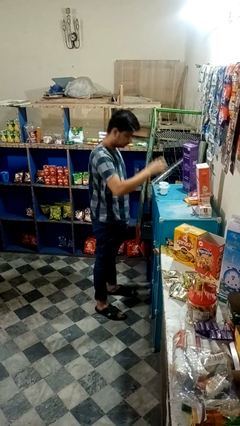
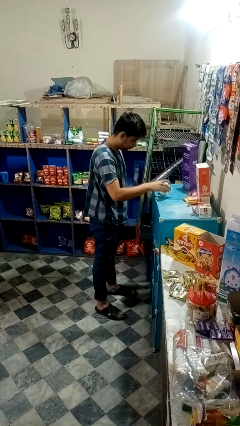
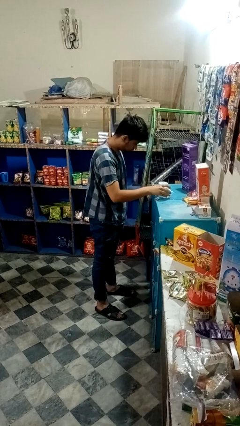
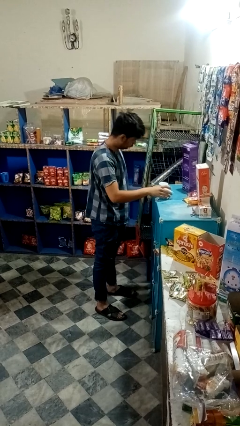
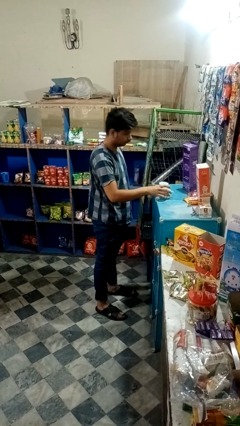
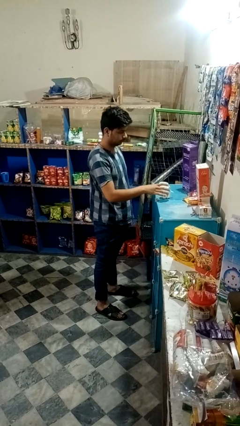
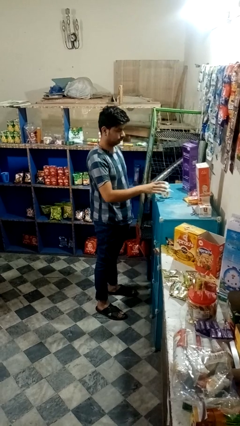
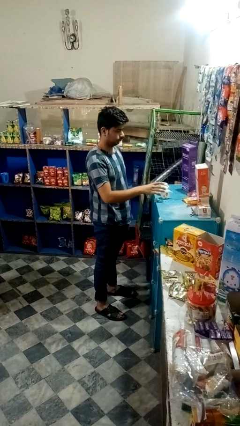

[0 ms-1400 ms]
person puts down object on table

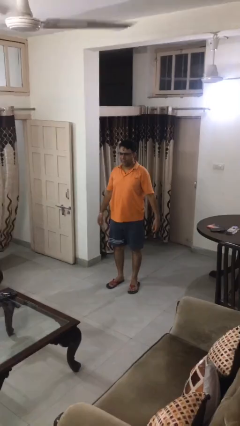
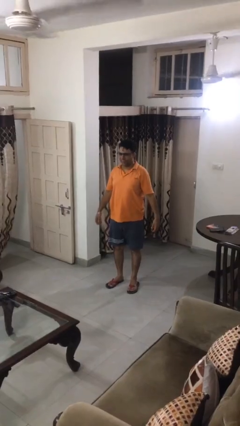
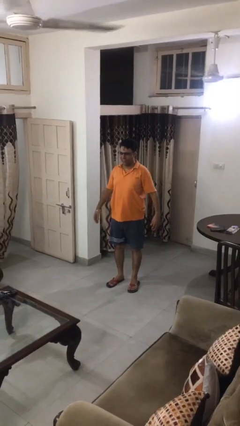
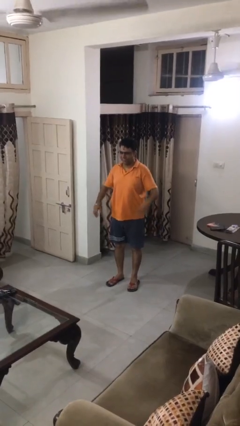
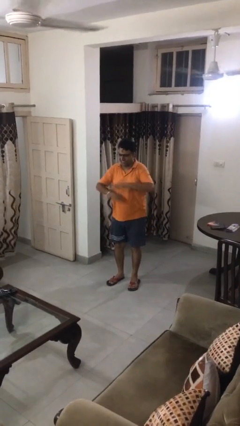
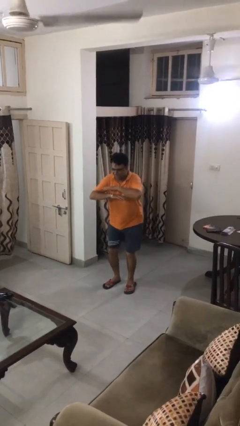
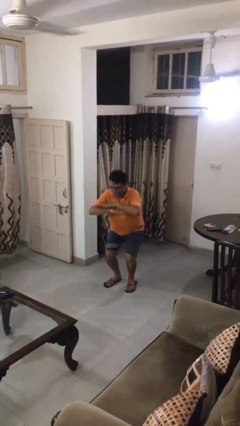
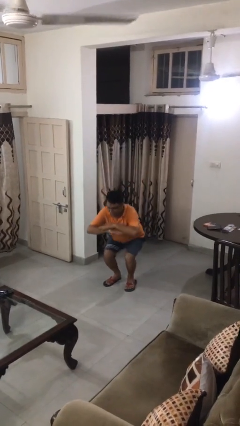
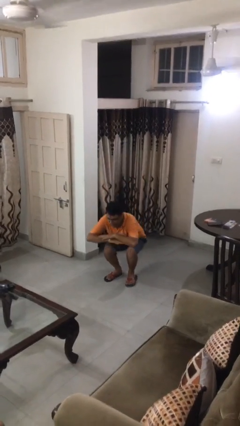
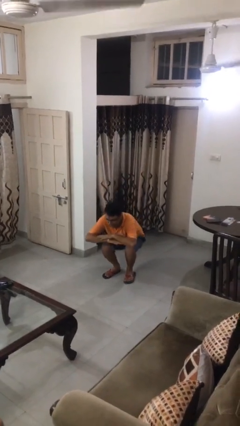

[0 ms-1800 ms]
person squats

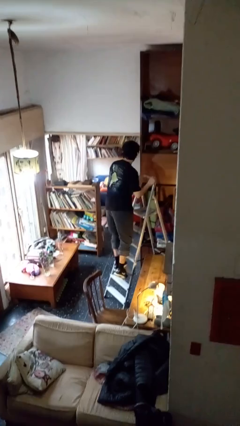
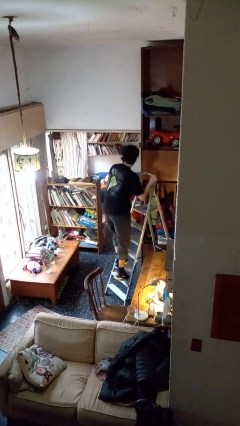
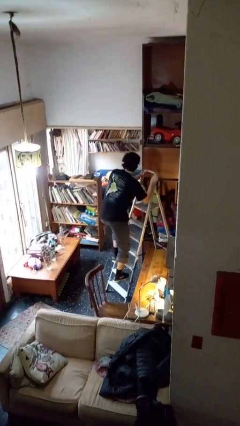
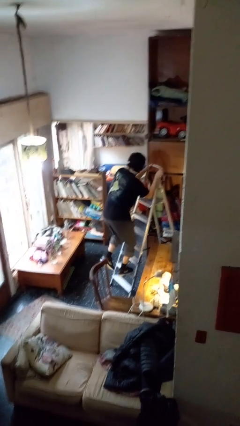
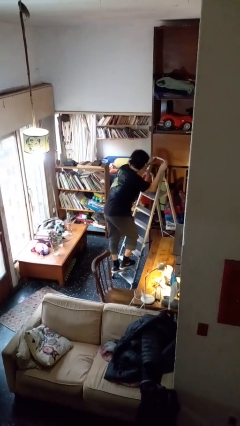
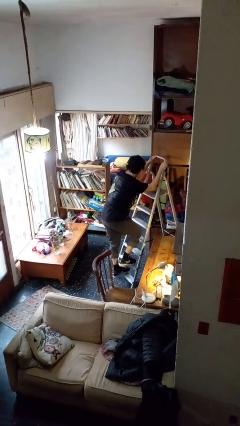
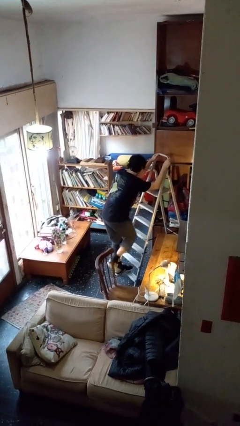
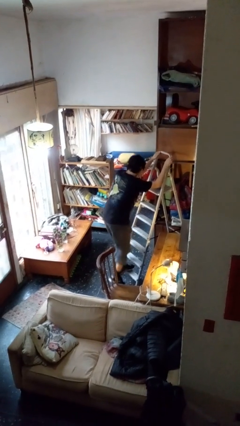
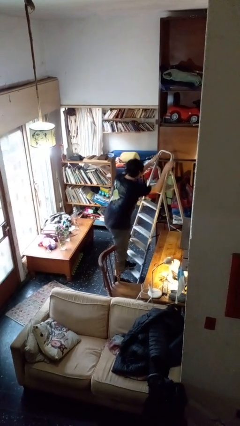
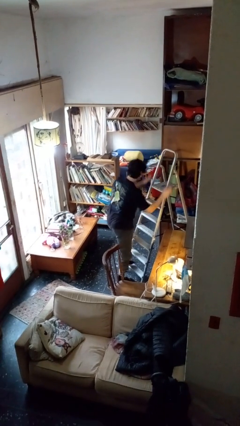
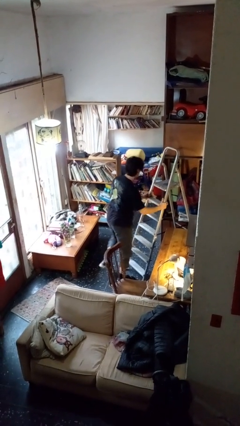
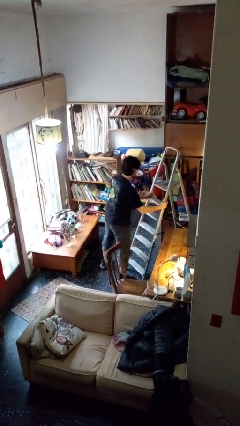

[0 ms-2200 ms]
person climbs down ladder

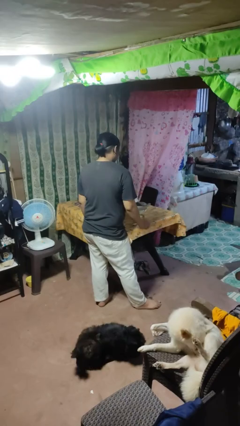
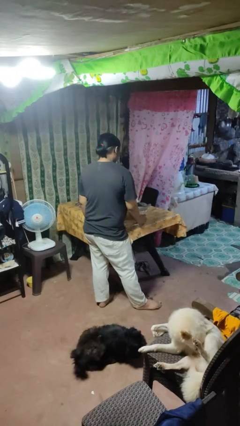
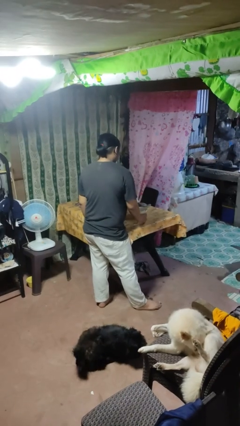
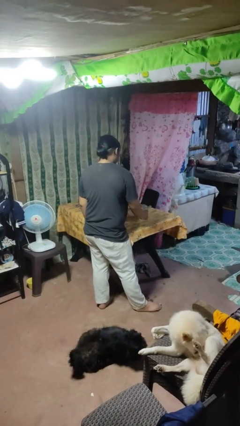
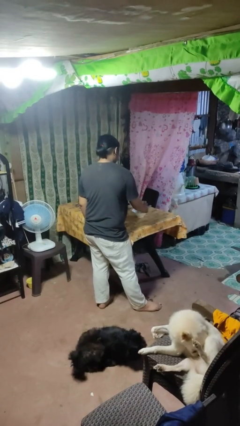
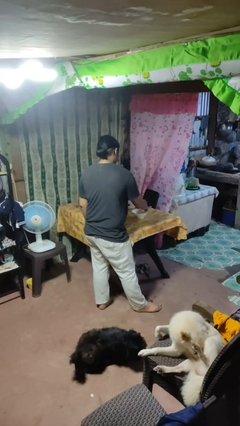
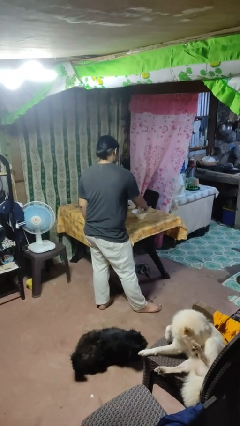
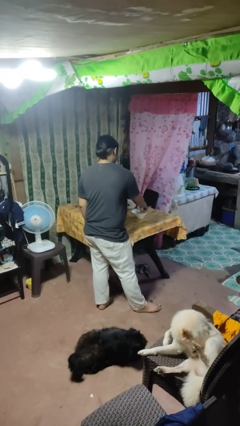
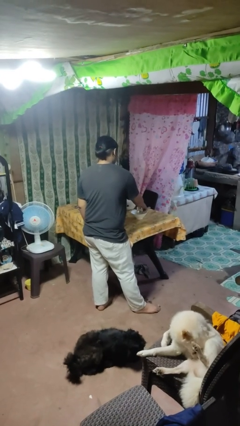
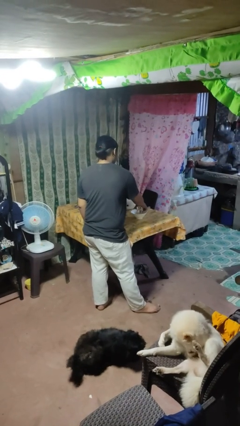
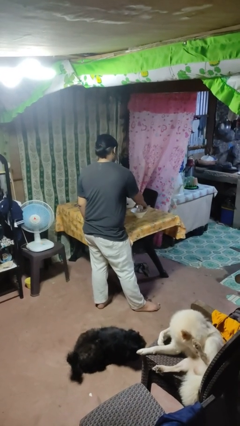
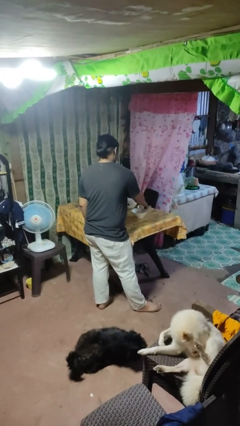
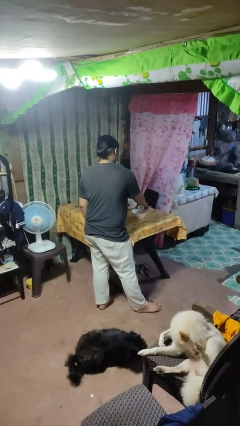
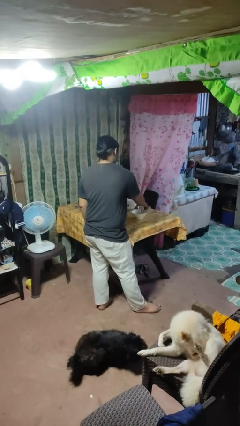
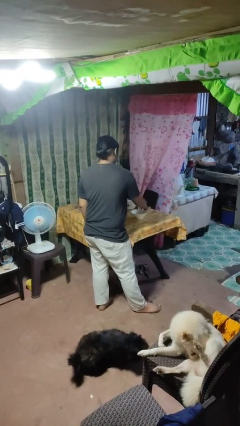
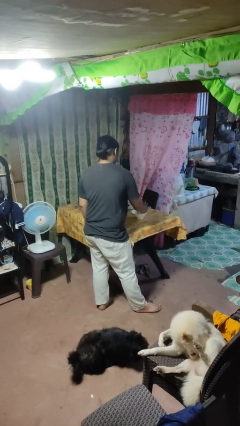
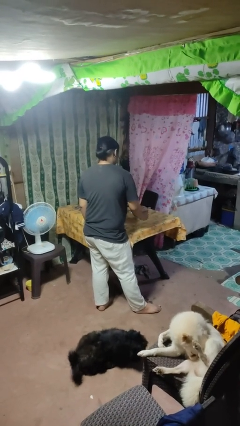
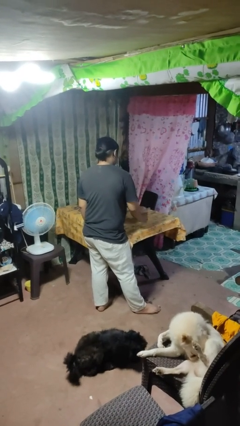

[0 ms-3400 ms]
person pours into bowl

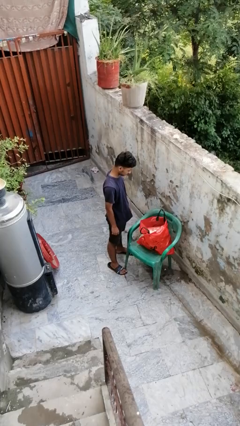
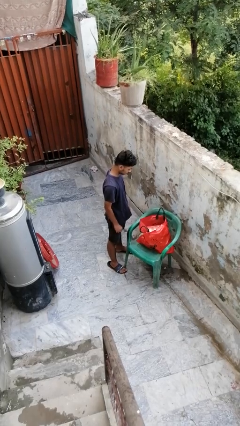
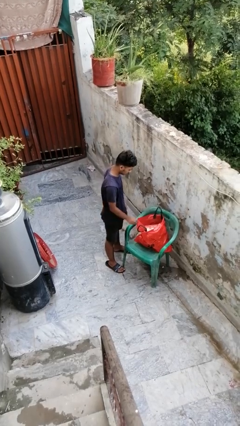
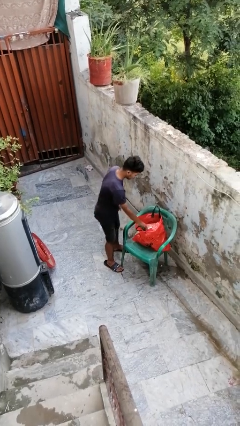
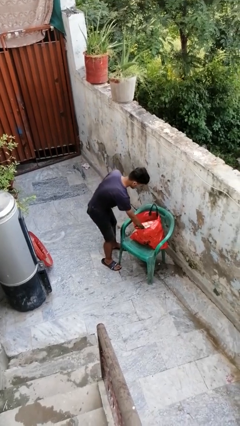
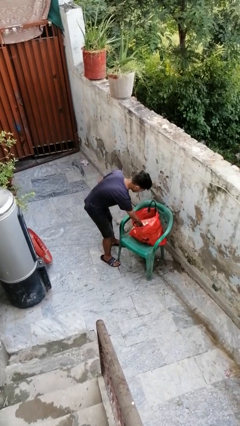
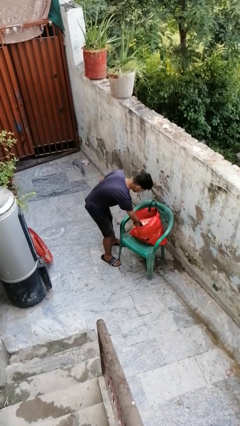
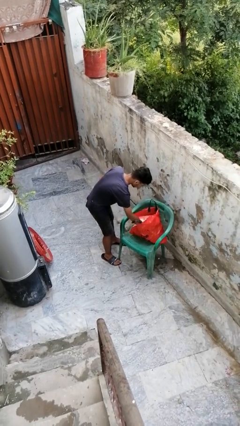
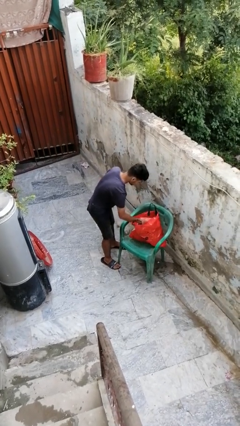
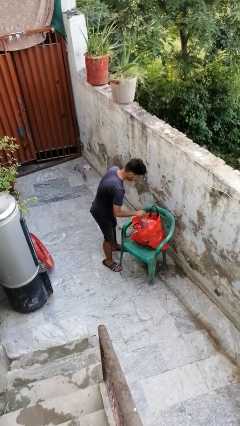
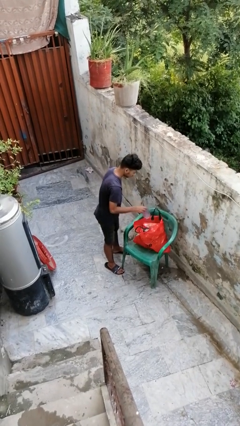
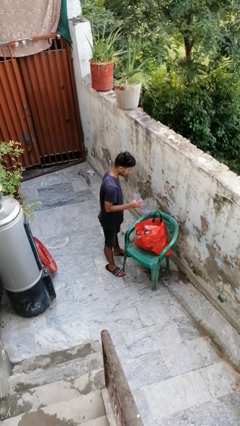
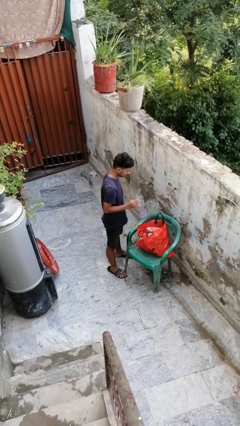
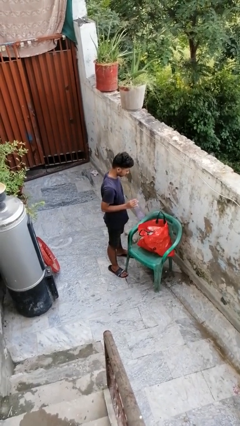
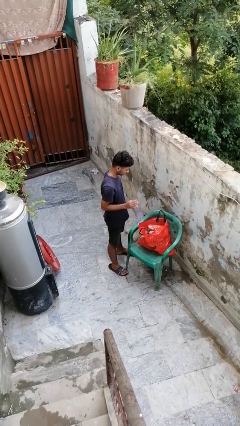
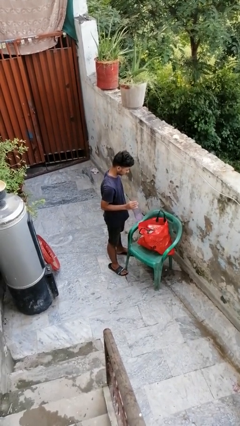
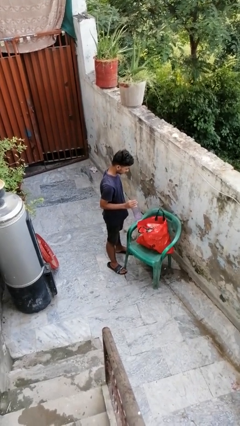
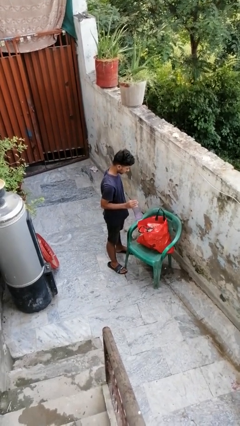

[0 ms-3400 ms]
person takes object from bag

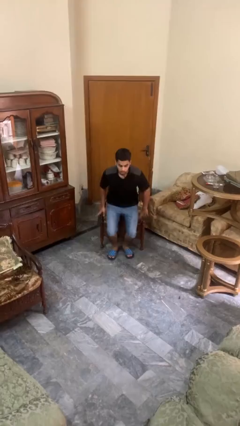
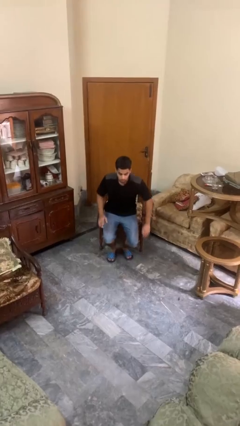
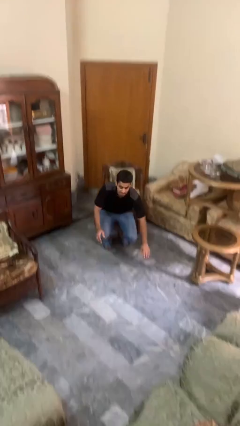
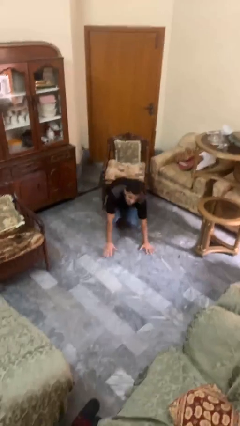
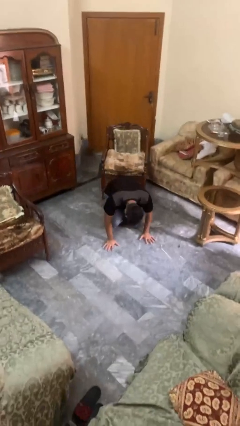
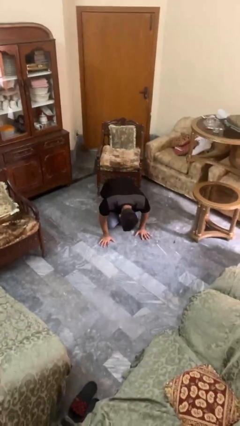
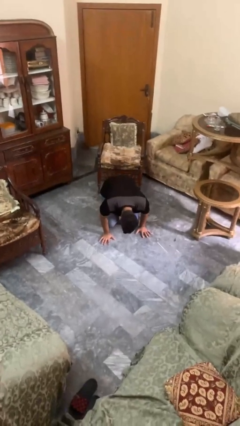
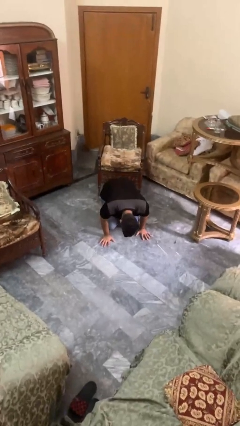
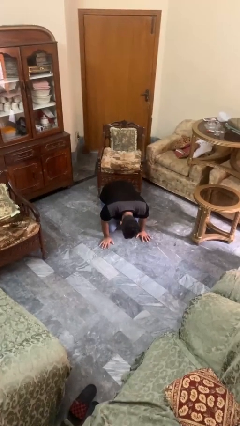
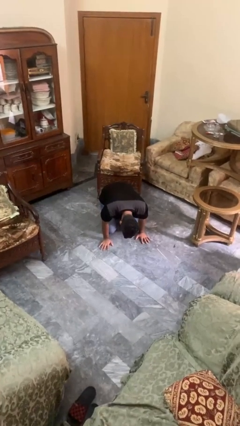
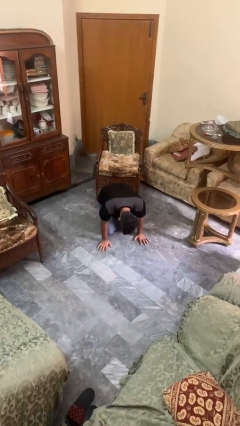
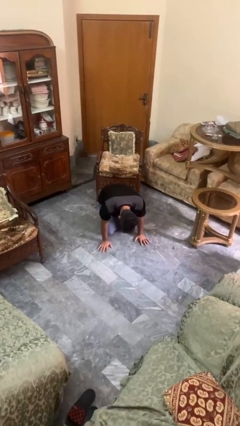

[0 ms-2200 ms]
person falls from chair

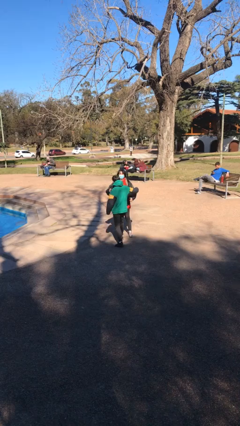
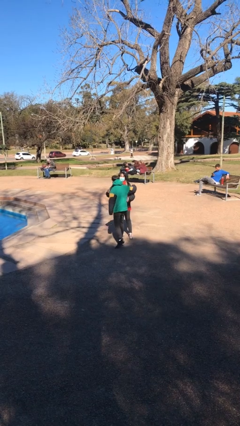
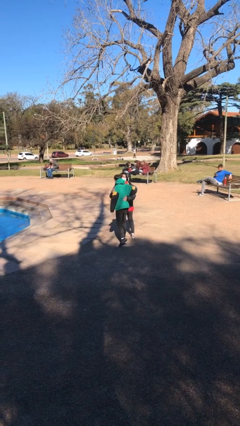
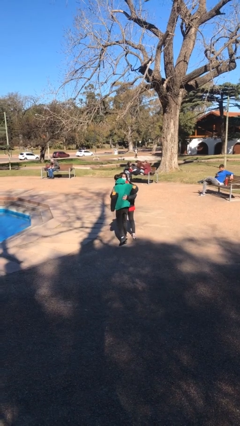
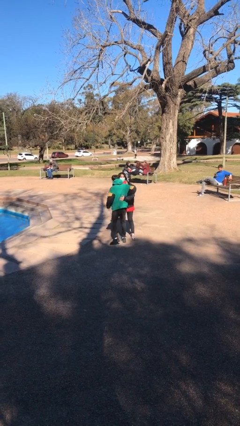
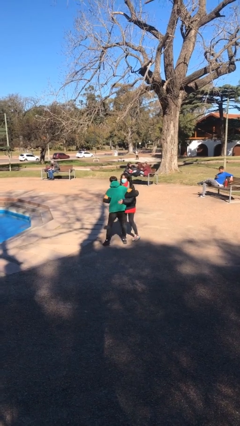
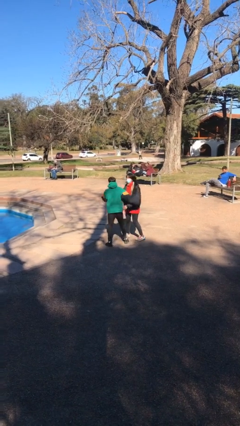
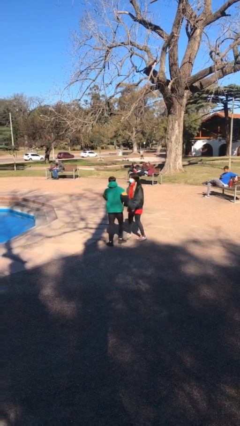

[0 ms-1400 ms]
person kisses cheek of person

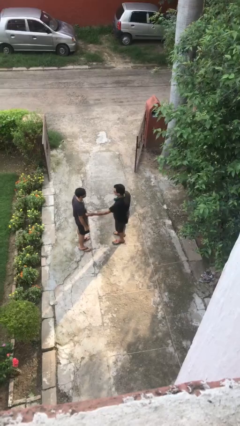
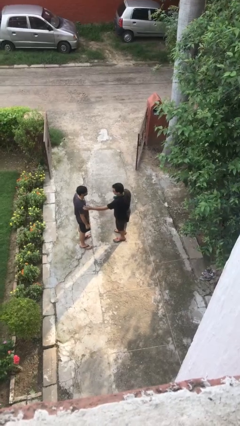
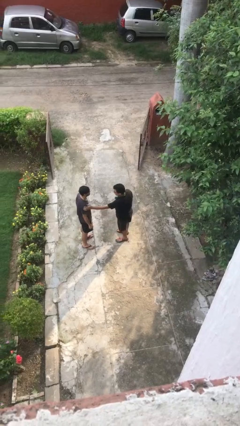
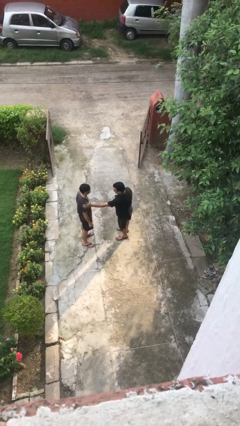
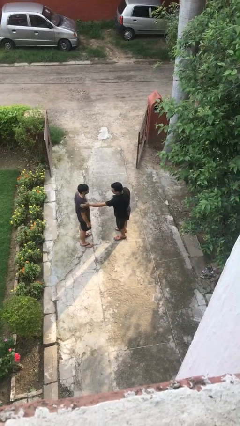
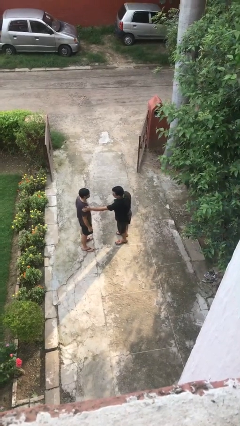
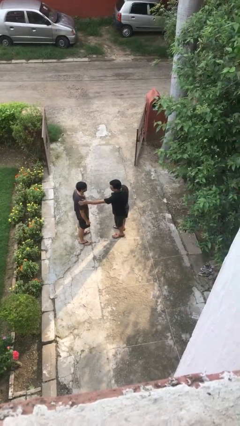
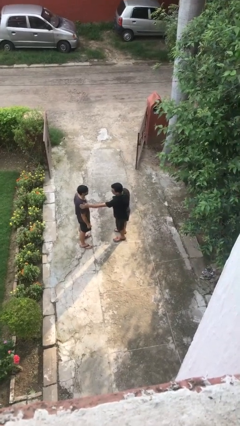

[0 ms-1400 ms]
person pounds shoulders of person
